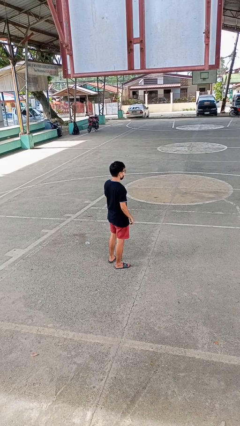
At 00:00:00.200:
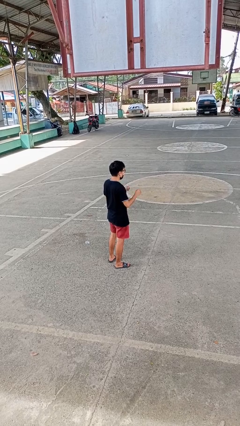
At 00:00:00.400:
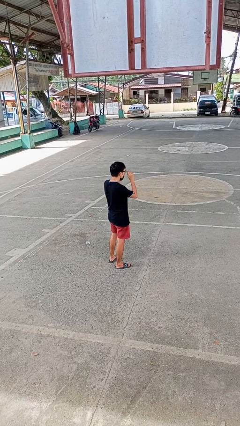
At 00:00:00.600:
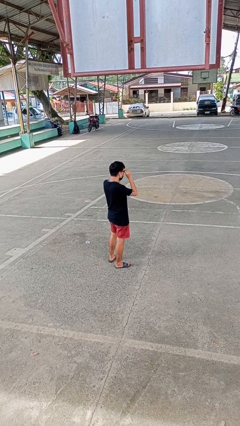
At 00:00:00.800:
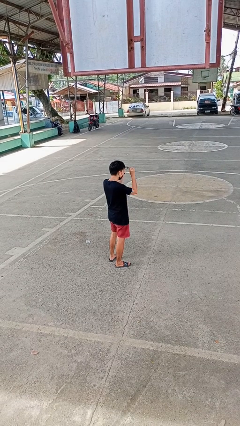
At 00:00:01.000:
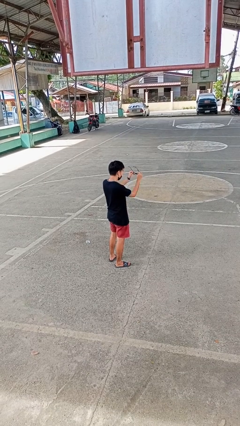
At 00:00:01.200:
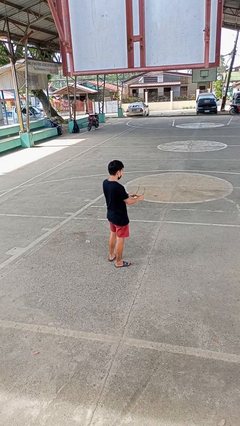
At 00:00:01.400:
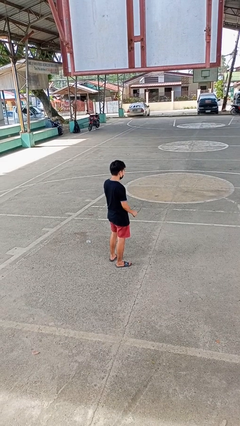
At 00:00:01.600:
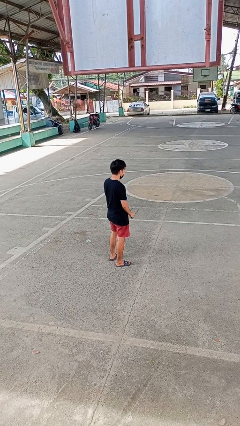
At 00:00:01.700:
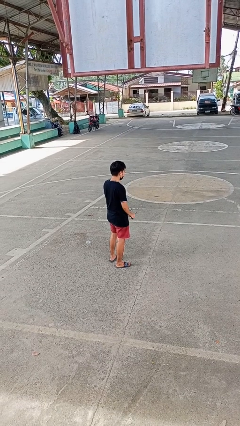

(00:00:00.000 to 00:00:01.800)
person takes off glasses

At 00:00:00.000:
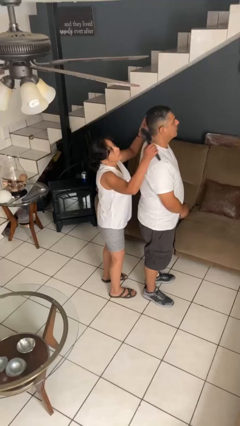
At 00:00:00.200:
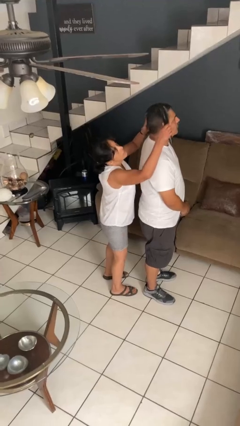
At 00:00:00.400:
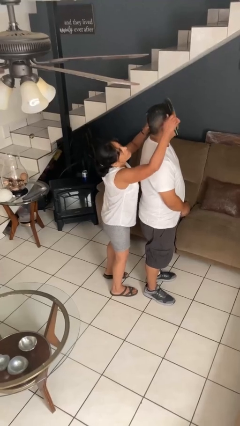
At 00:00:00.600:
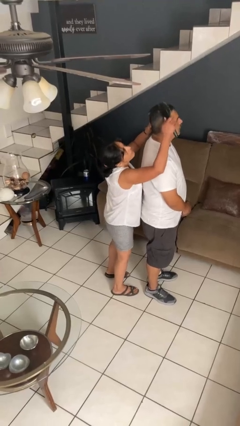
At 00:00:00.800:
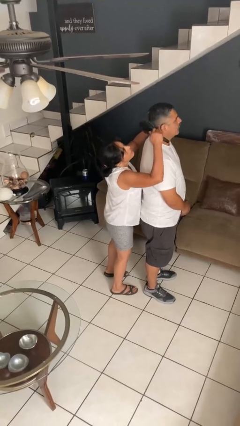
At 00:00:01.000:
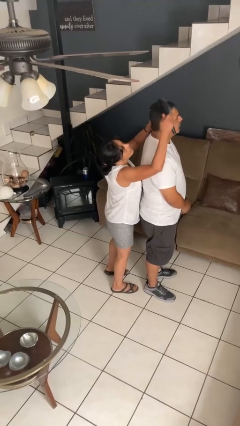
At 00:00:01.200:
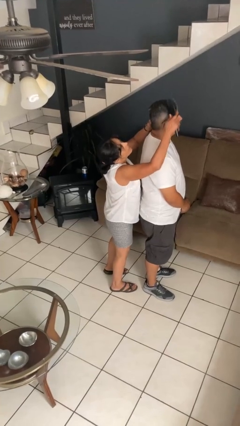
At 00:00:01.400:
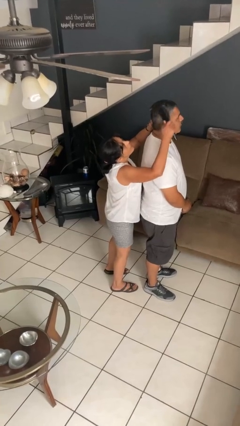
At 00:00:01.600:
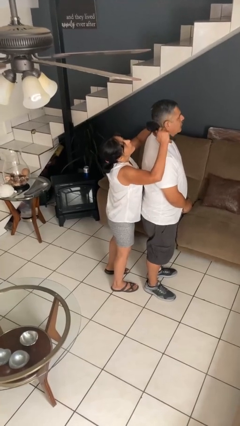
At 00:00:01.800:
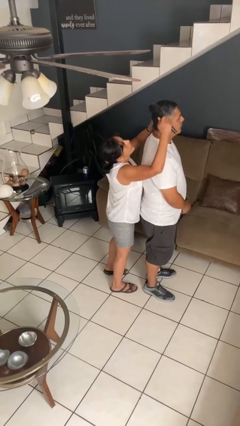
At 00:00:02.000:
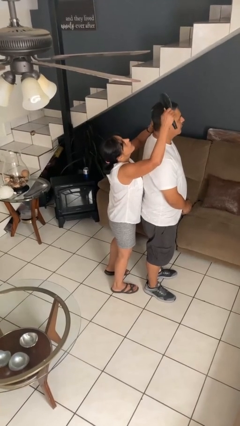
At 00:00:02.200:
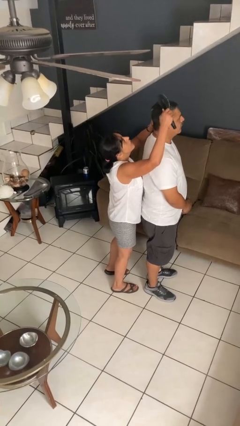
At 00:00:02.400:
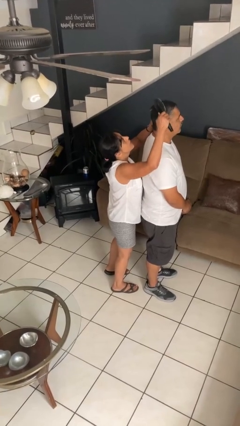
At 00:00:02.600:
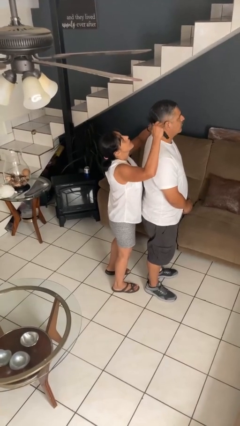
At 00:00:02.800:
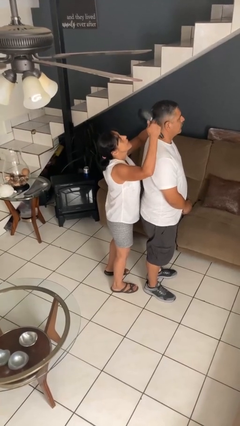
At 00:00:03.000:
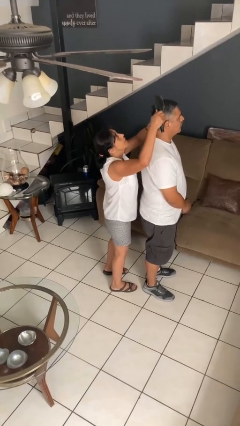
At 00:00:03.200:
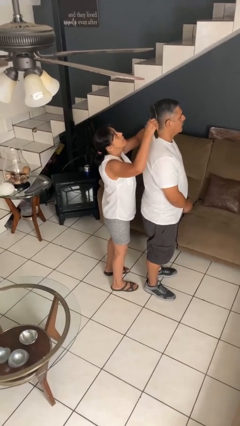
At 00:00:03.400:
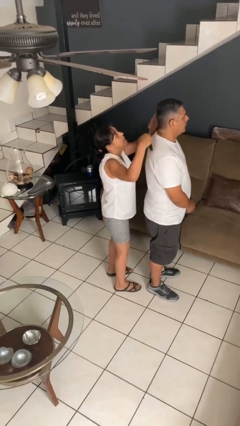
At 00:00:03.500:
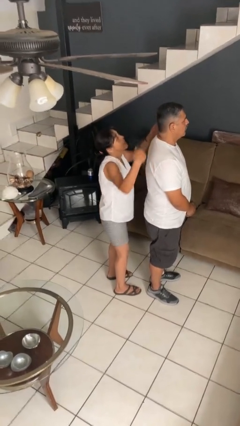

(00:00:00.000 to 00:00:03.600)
person brushes hair of person

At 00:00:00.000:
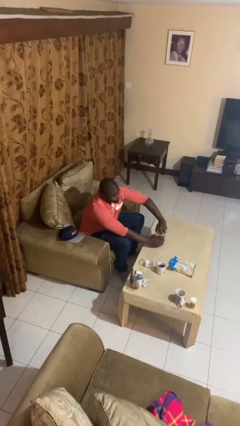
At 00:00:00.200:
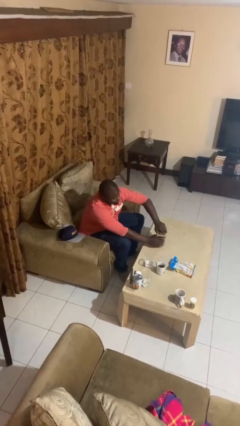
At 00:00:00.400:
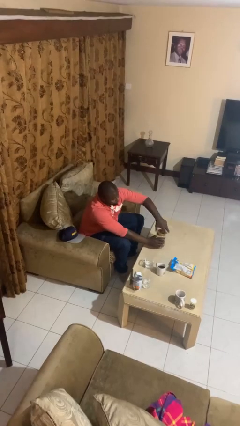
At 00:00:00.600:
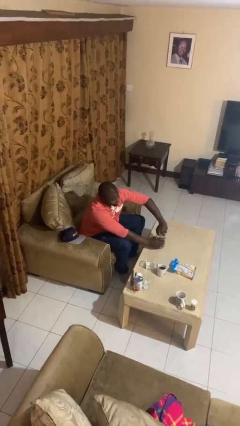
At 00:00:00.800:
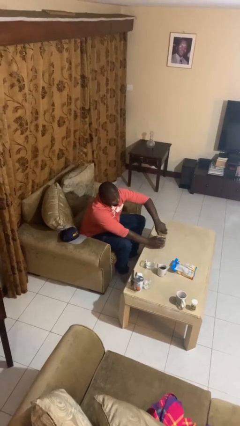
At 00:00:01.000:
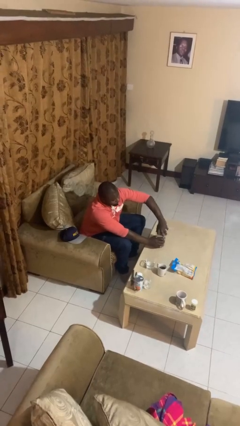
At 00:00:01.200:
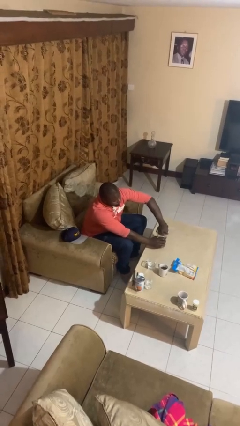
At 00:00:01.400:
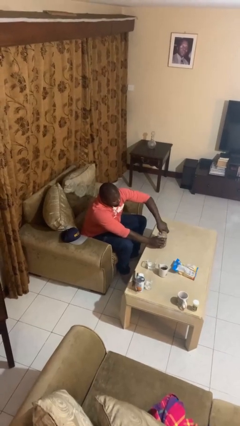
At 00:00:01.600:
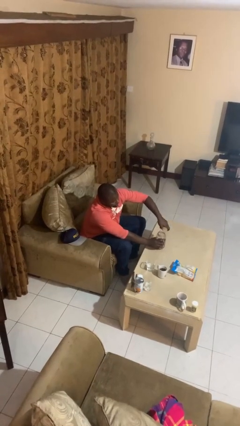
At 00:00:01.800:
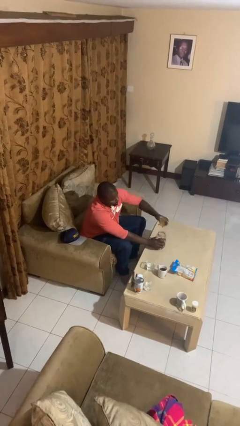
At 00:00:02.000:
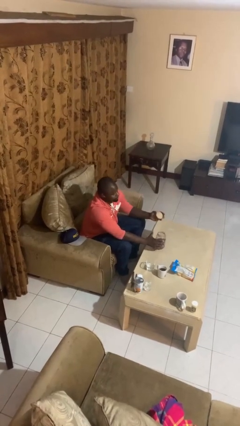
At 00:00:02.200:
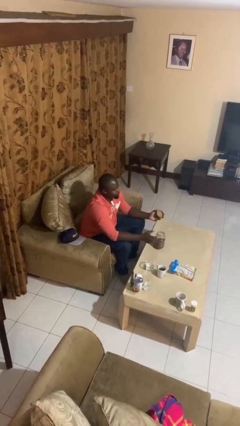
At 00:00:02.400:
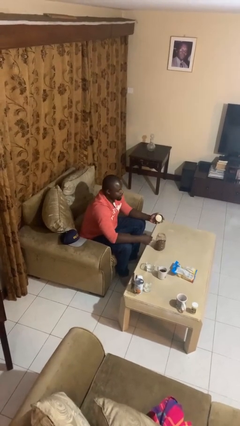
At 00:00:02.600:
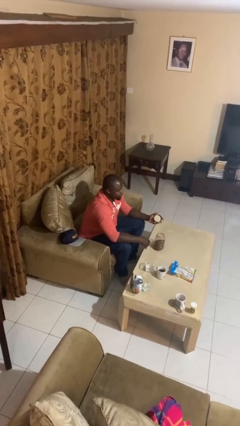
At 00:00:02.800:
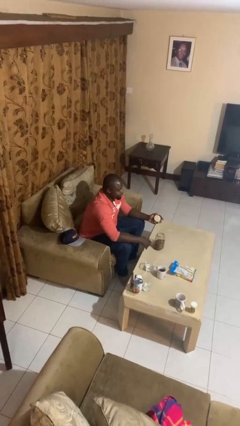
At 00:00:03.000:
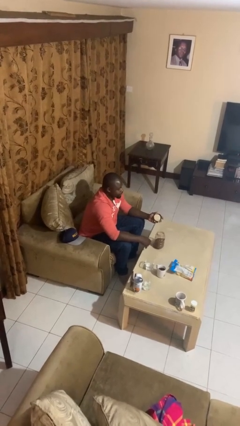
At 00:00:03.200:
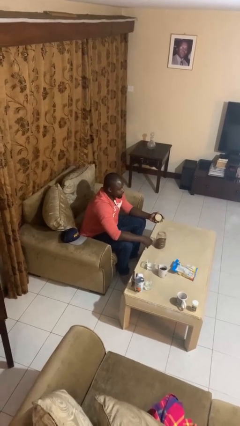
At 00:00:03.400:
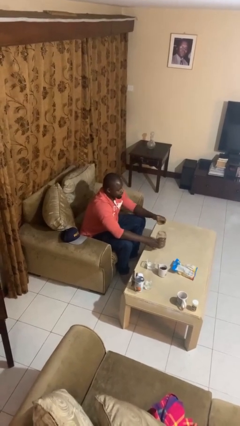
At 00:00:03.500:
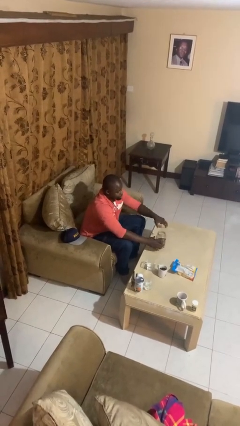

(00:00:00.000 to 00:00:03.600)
person opens jar

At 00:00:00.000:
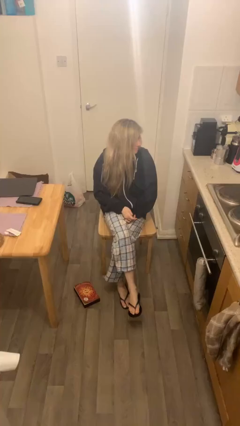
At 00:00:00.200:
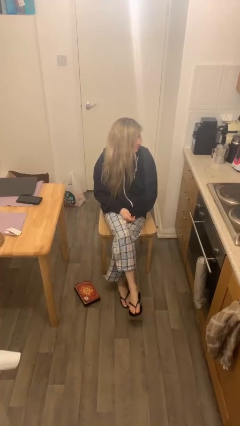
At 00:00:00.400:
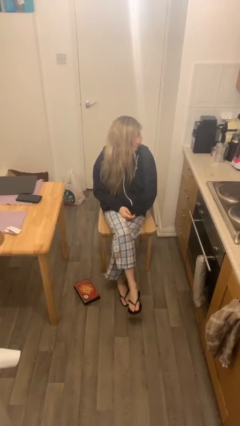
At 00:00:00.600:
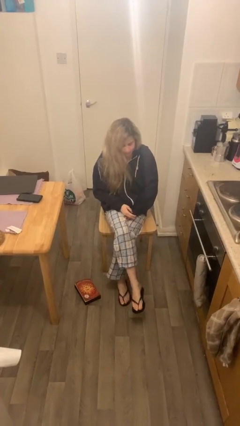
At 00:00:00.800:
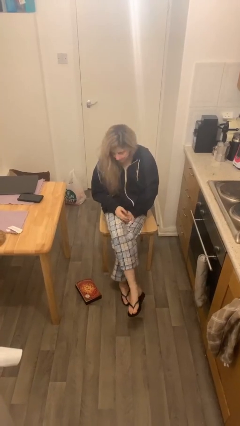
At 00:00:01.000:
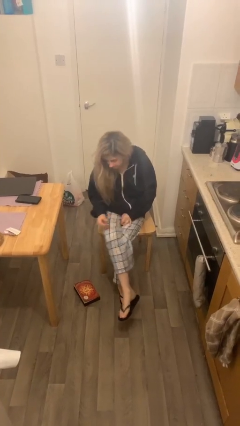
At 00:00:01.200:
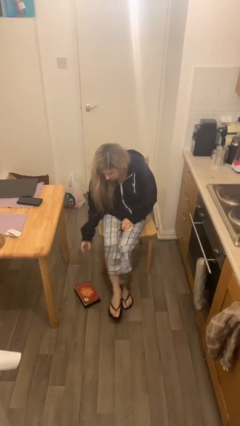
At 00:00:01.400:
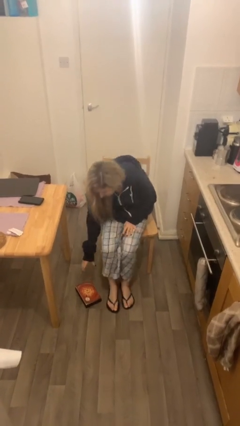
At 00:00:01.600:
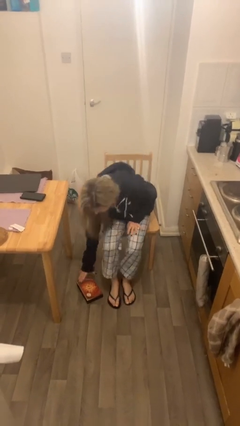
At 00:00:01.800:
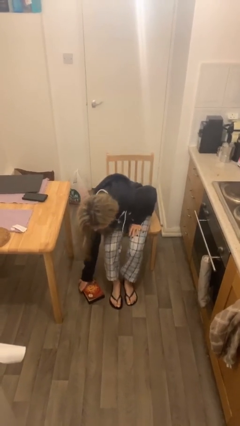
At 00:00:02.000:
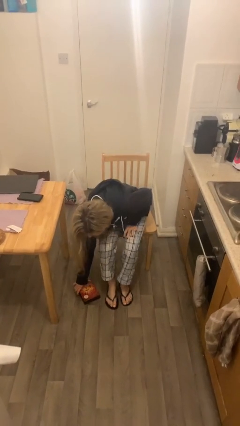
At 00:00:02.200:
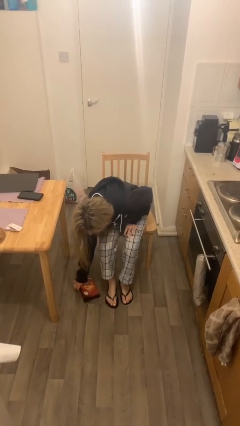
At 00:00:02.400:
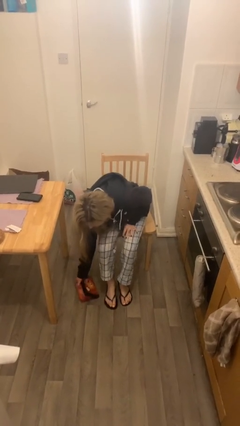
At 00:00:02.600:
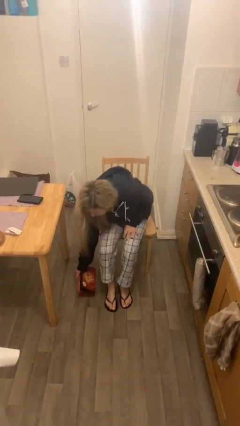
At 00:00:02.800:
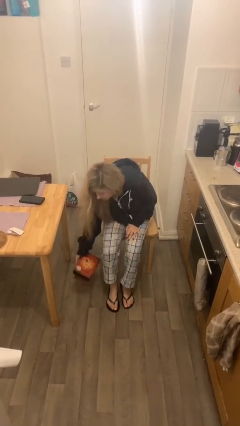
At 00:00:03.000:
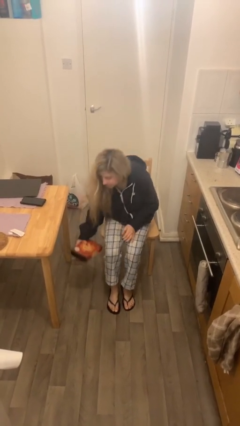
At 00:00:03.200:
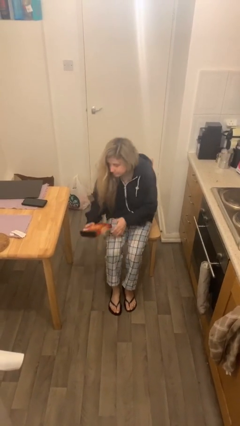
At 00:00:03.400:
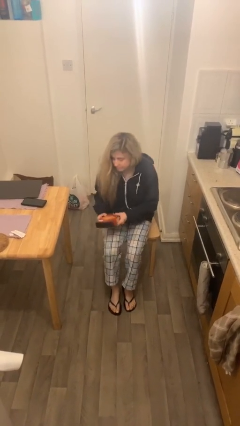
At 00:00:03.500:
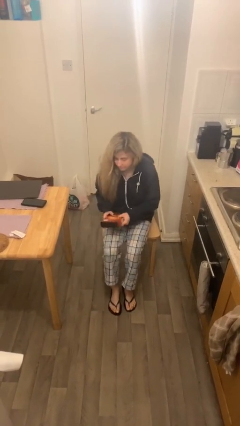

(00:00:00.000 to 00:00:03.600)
person picks up object from floor

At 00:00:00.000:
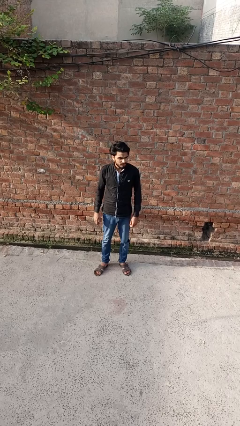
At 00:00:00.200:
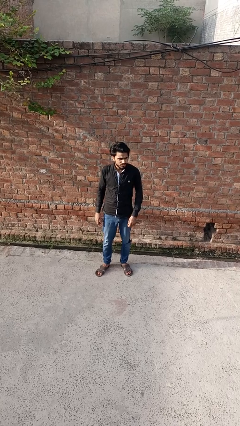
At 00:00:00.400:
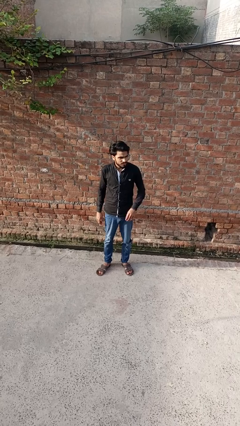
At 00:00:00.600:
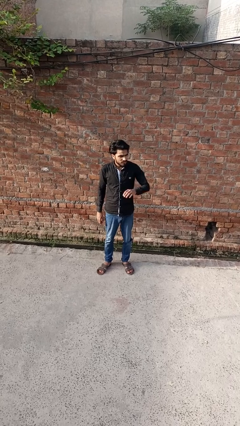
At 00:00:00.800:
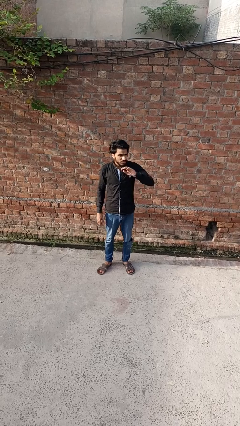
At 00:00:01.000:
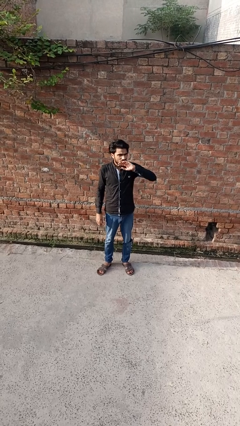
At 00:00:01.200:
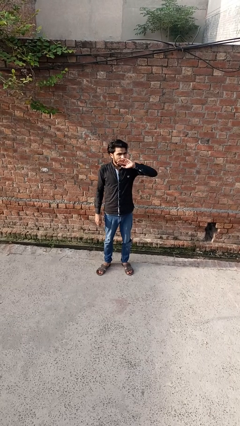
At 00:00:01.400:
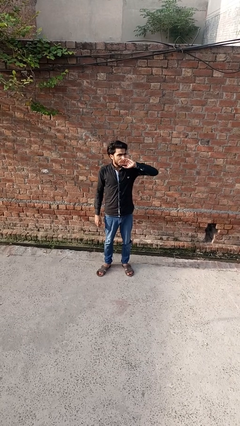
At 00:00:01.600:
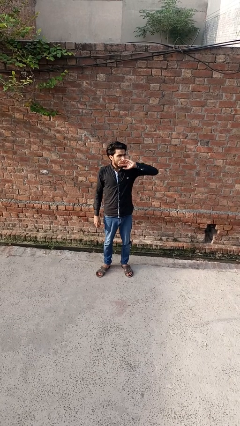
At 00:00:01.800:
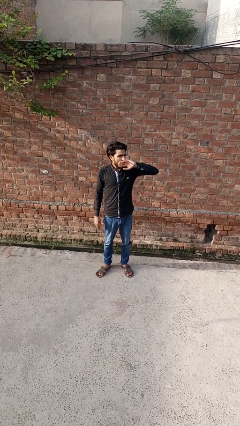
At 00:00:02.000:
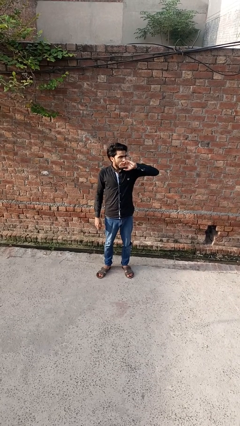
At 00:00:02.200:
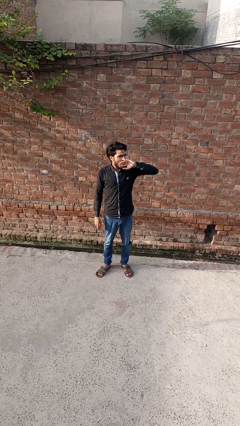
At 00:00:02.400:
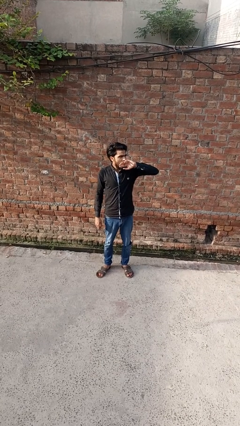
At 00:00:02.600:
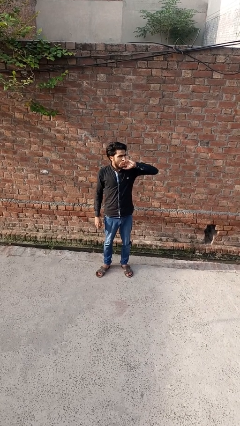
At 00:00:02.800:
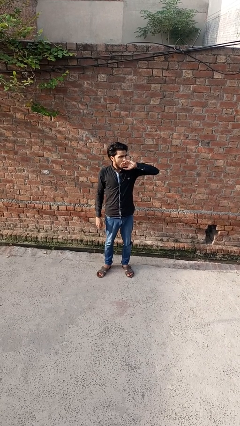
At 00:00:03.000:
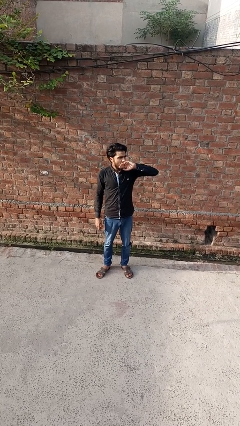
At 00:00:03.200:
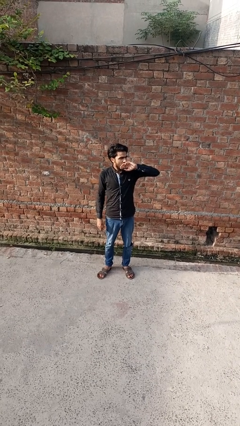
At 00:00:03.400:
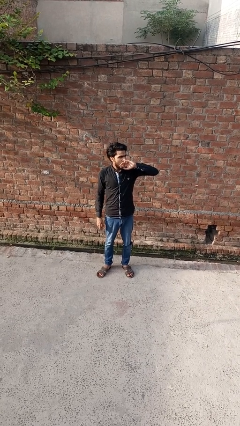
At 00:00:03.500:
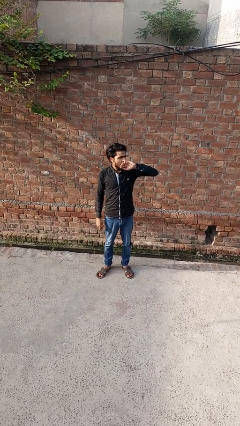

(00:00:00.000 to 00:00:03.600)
person yawns

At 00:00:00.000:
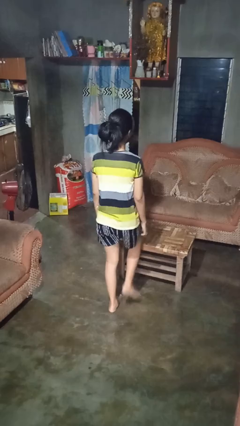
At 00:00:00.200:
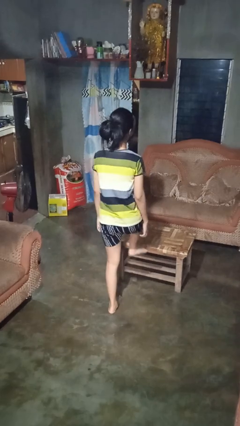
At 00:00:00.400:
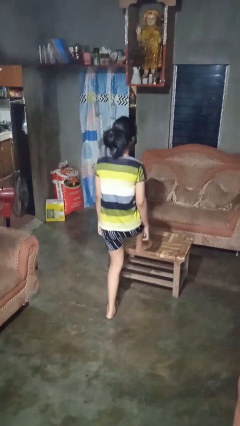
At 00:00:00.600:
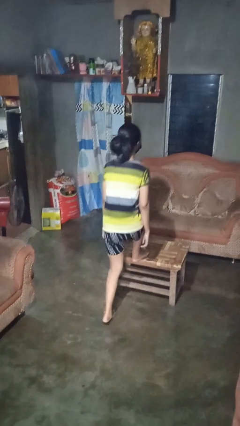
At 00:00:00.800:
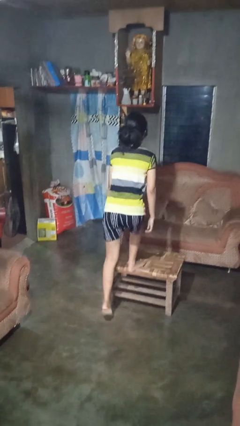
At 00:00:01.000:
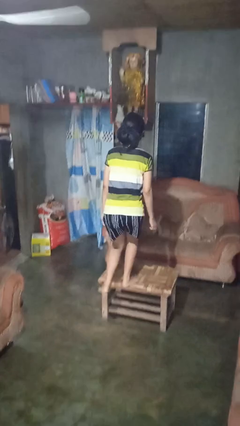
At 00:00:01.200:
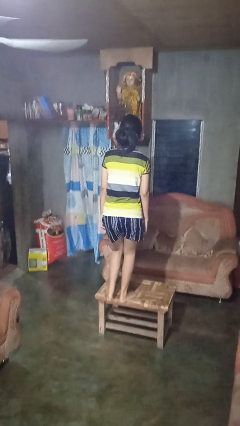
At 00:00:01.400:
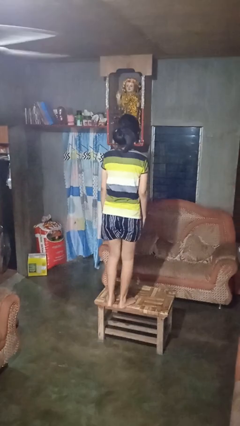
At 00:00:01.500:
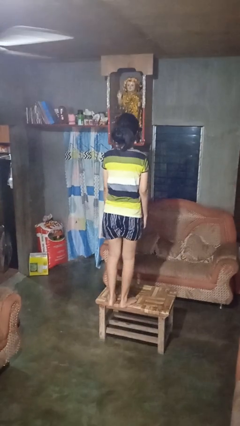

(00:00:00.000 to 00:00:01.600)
person climbs on table
